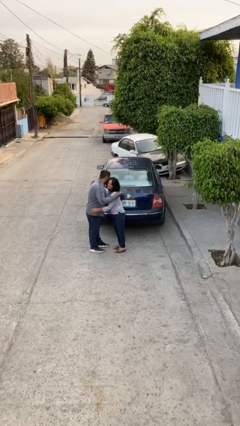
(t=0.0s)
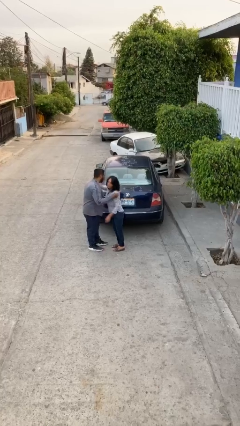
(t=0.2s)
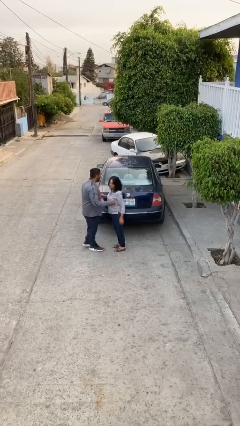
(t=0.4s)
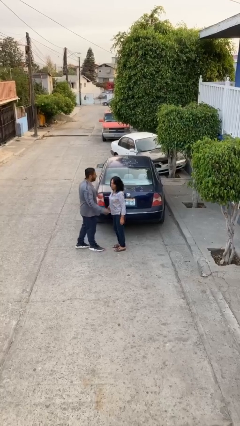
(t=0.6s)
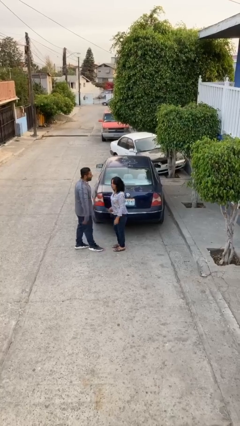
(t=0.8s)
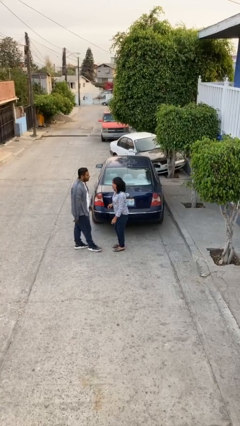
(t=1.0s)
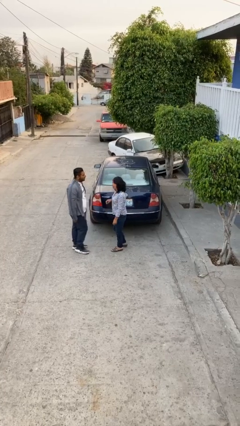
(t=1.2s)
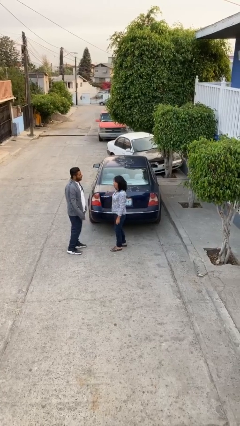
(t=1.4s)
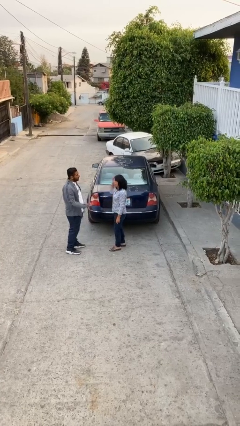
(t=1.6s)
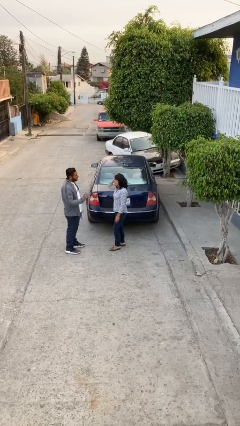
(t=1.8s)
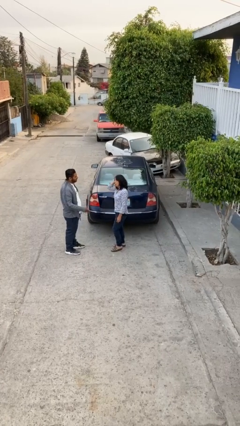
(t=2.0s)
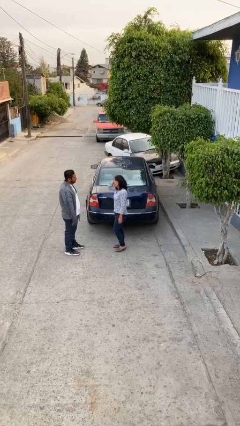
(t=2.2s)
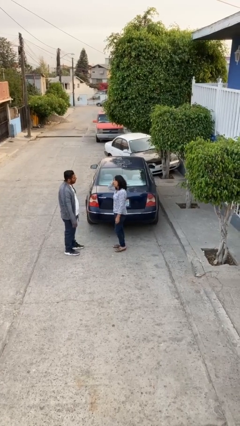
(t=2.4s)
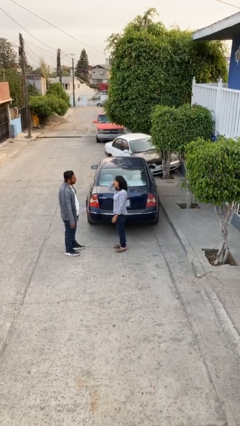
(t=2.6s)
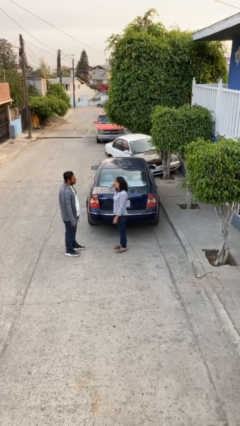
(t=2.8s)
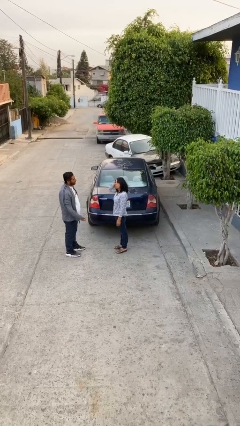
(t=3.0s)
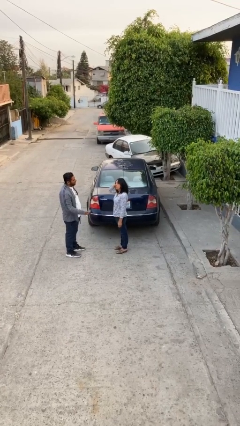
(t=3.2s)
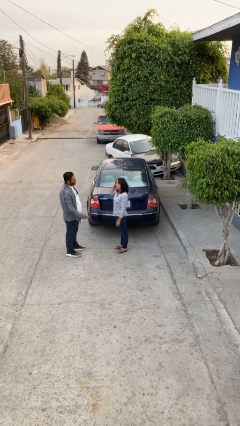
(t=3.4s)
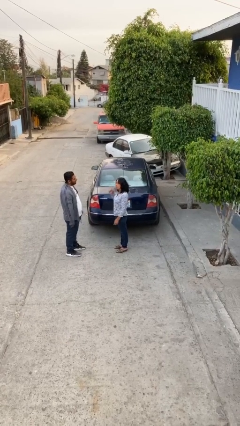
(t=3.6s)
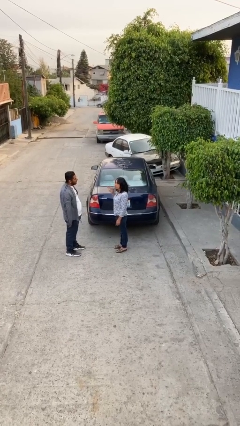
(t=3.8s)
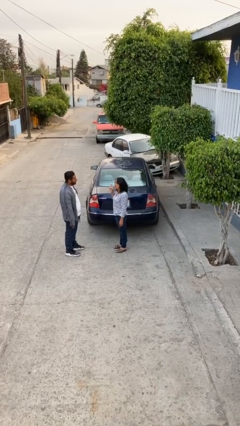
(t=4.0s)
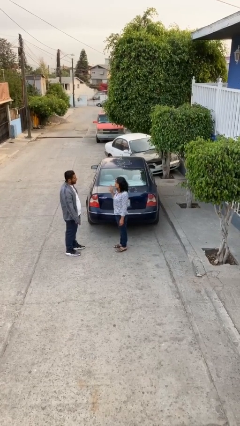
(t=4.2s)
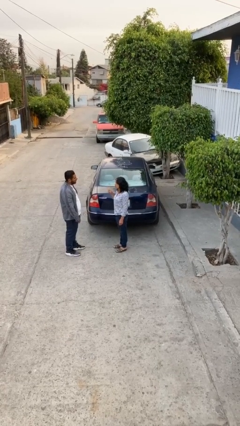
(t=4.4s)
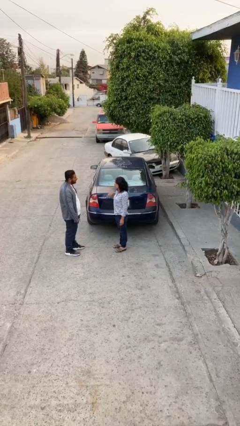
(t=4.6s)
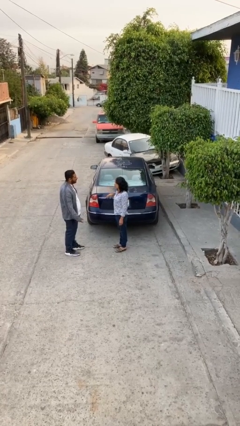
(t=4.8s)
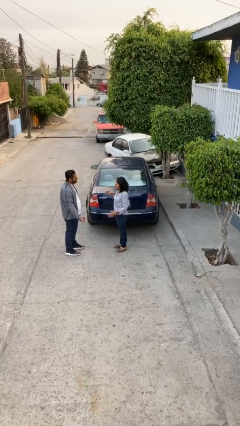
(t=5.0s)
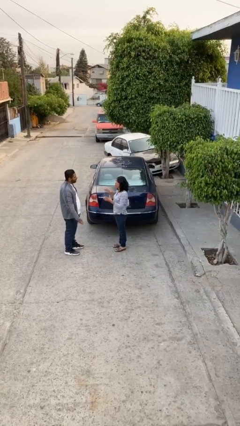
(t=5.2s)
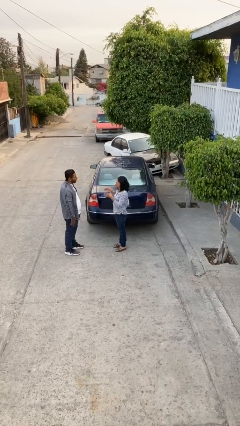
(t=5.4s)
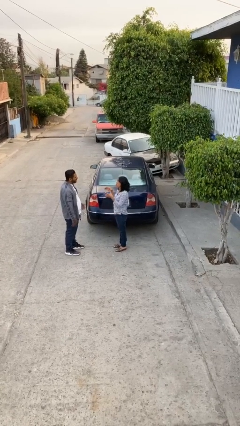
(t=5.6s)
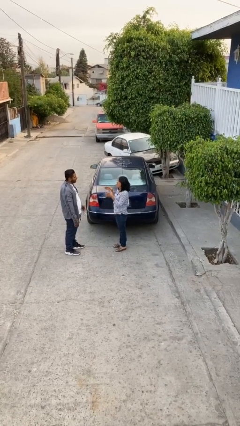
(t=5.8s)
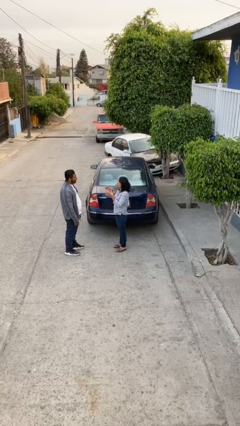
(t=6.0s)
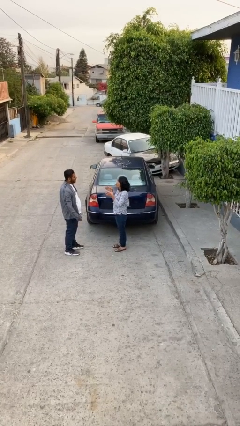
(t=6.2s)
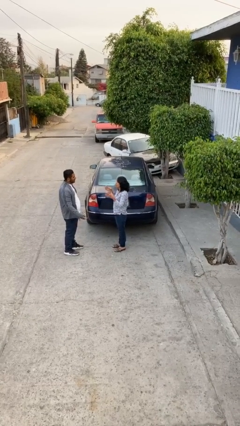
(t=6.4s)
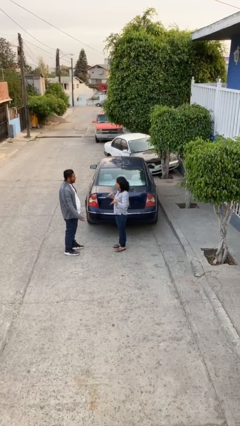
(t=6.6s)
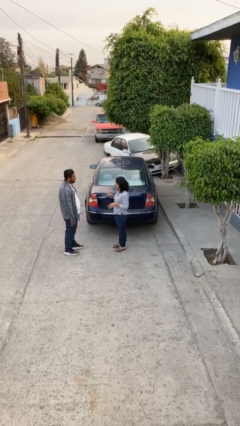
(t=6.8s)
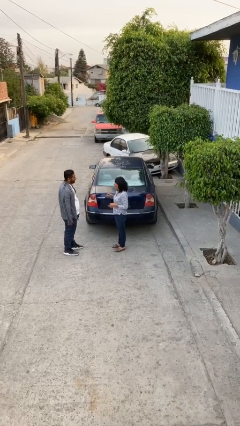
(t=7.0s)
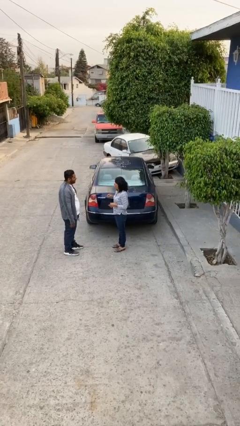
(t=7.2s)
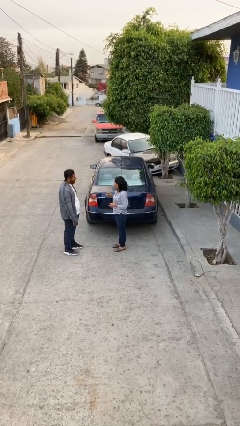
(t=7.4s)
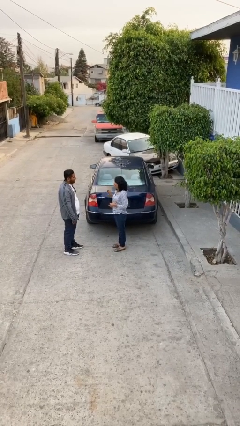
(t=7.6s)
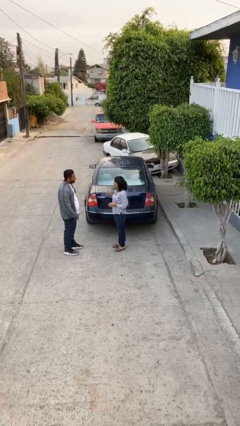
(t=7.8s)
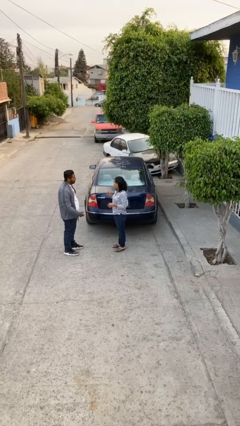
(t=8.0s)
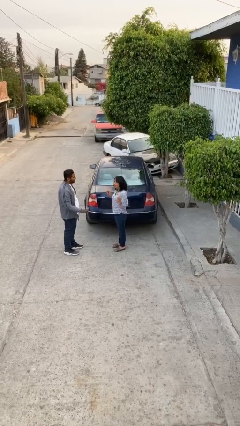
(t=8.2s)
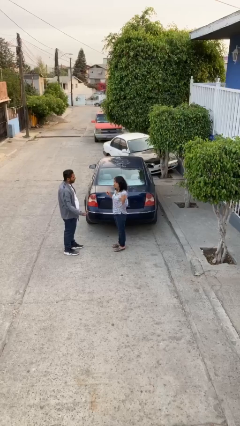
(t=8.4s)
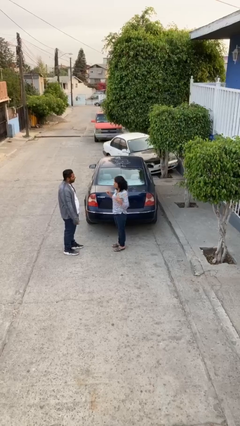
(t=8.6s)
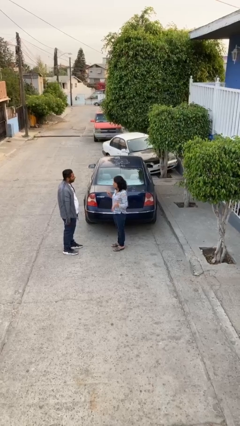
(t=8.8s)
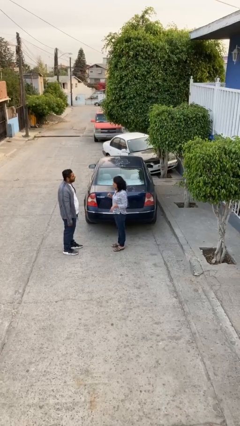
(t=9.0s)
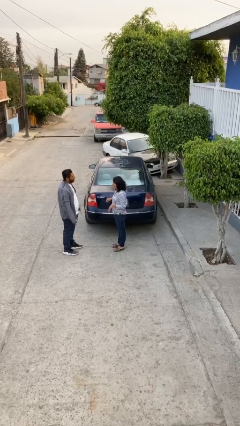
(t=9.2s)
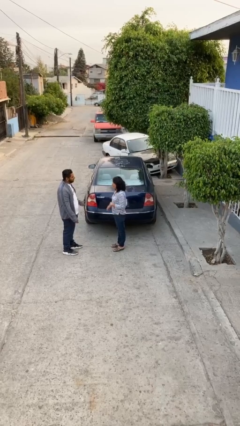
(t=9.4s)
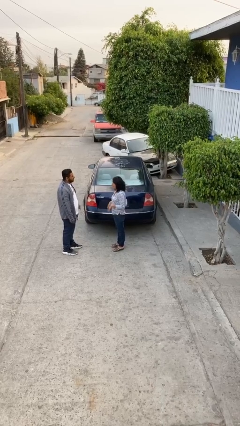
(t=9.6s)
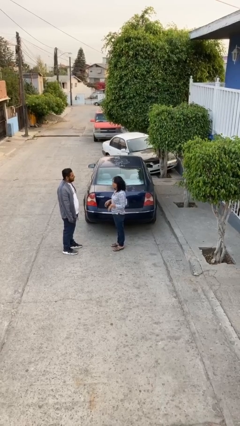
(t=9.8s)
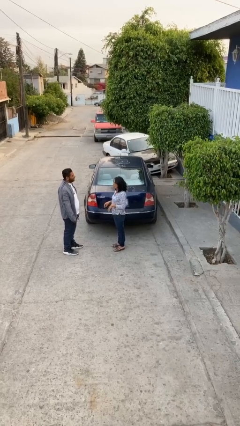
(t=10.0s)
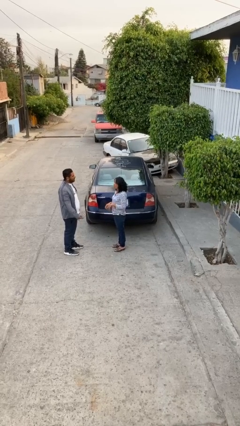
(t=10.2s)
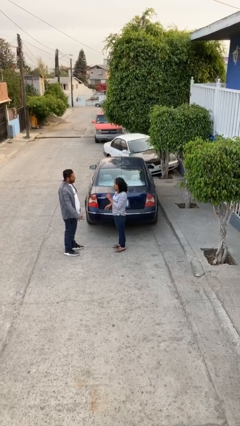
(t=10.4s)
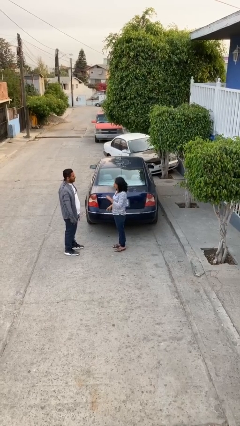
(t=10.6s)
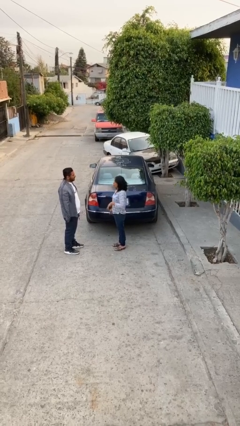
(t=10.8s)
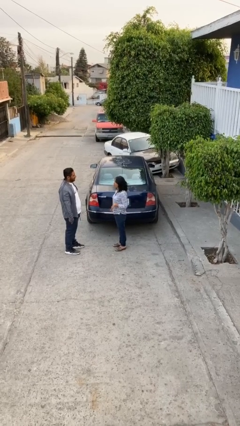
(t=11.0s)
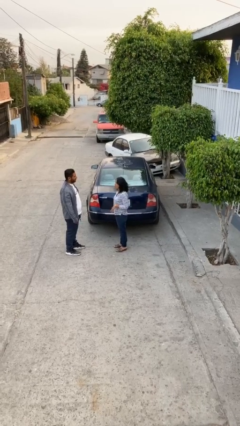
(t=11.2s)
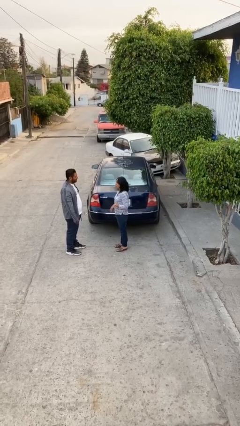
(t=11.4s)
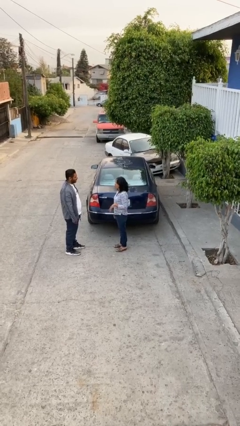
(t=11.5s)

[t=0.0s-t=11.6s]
person talks to person

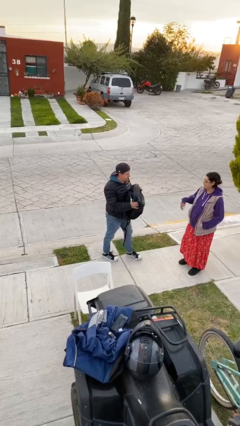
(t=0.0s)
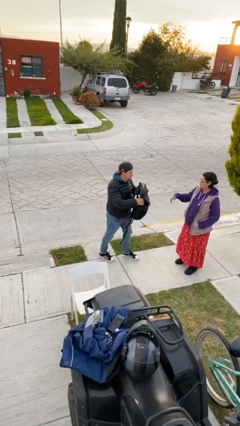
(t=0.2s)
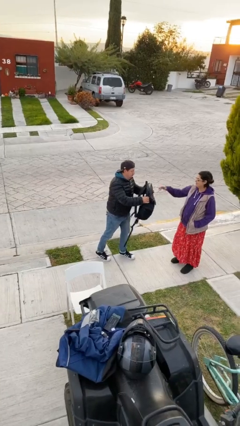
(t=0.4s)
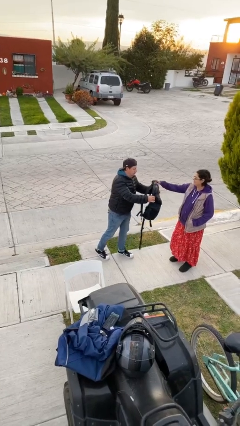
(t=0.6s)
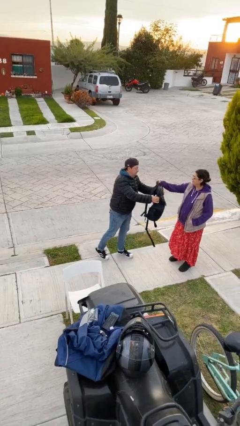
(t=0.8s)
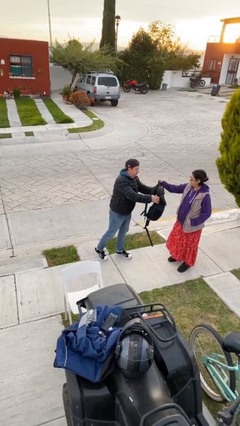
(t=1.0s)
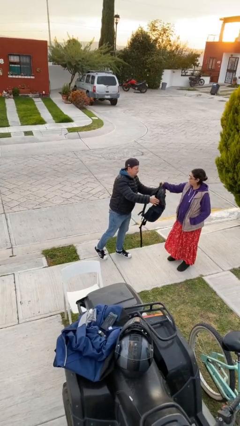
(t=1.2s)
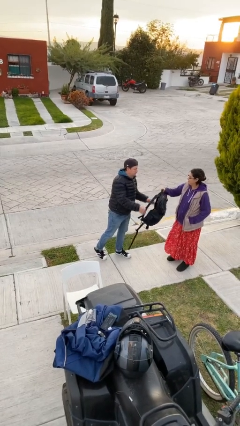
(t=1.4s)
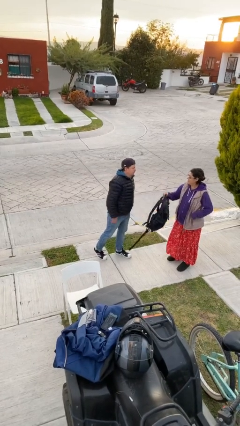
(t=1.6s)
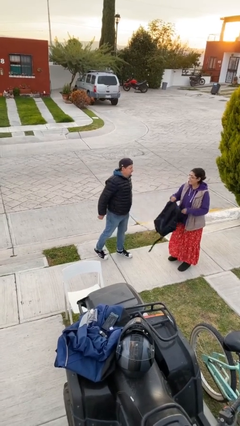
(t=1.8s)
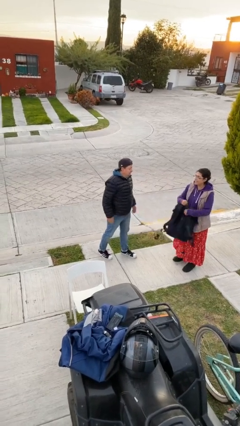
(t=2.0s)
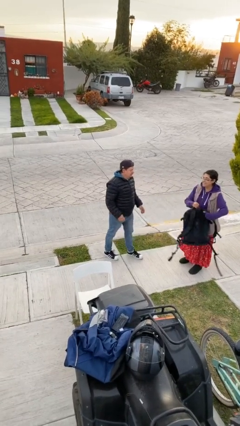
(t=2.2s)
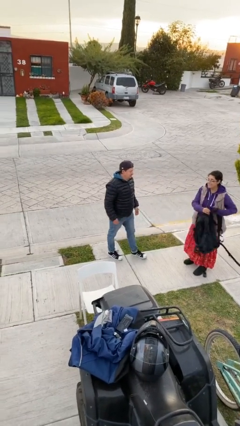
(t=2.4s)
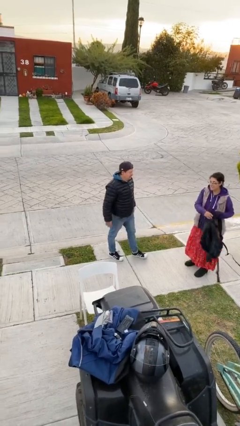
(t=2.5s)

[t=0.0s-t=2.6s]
person transfers object to person

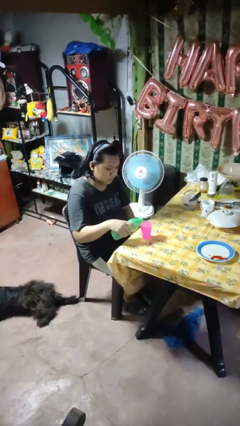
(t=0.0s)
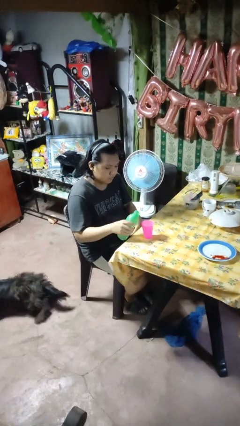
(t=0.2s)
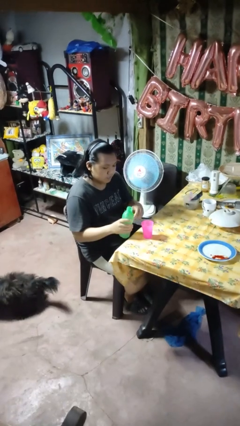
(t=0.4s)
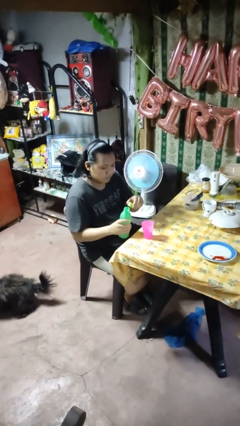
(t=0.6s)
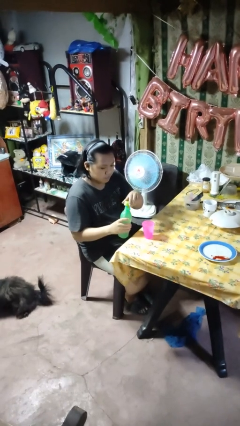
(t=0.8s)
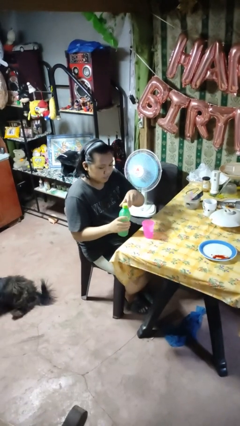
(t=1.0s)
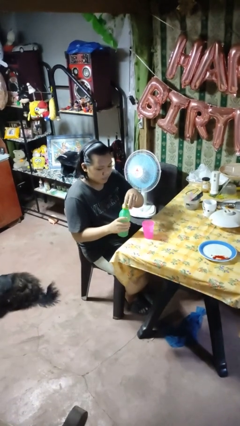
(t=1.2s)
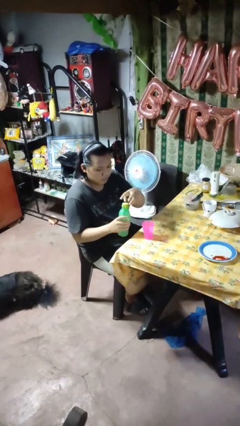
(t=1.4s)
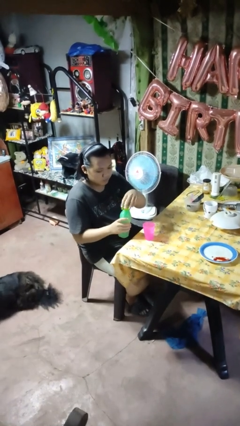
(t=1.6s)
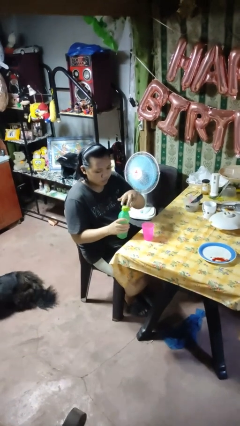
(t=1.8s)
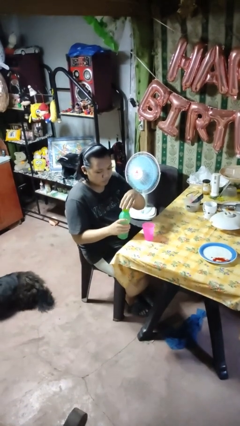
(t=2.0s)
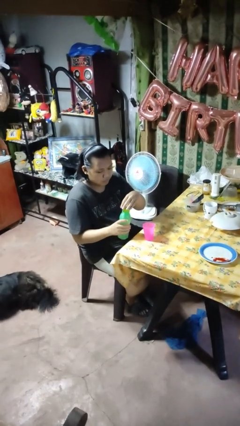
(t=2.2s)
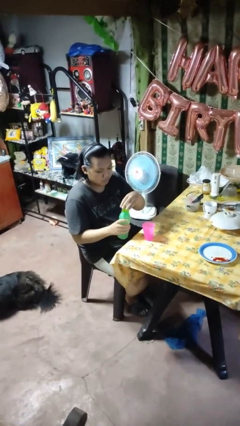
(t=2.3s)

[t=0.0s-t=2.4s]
person screws lid to bottle

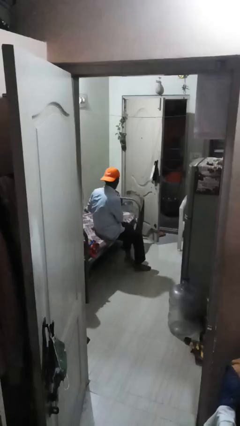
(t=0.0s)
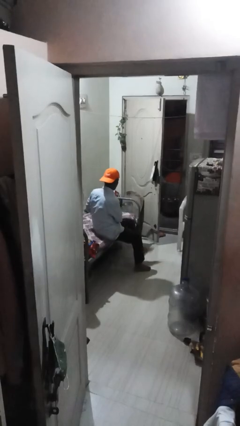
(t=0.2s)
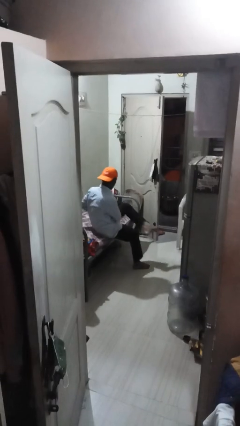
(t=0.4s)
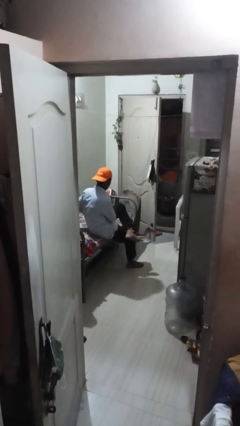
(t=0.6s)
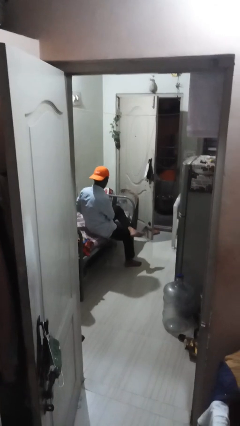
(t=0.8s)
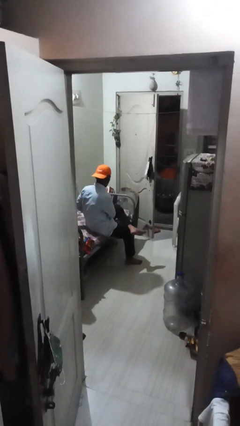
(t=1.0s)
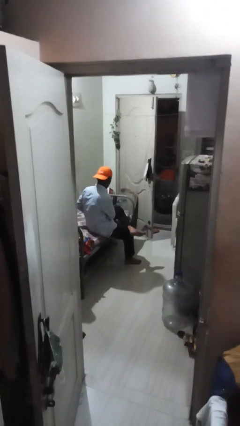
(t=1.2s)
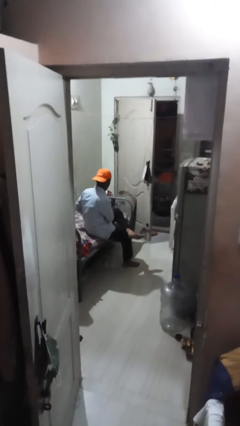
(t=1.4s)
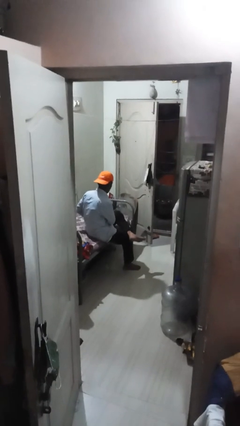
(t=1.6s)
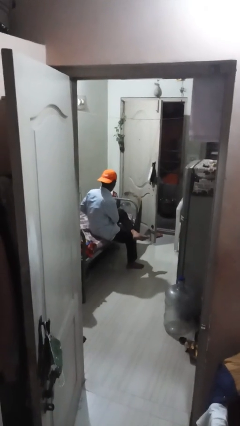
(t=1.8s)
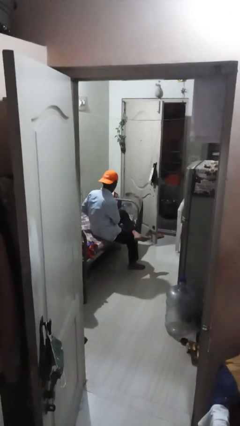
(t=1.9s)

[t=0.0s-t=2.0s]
person crosses legs
